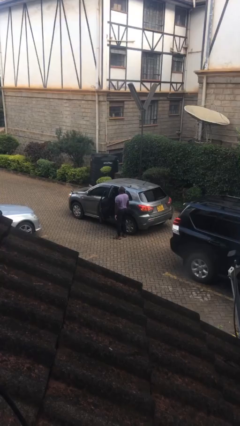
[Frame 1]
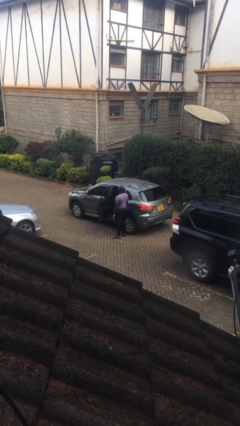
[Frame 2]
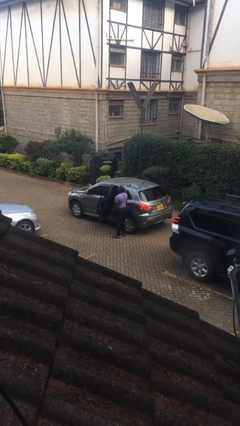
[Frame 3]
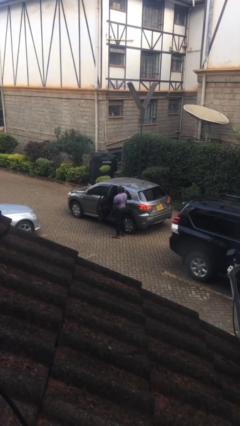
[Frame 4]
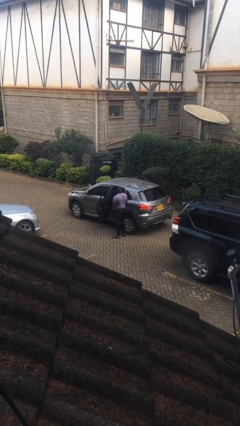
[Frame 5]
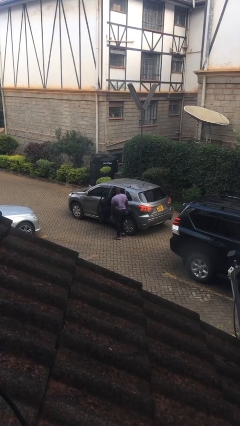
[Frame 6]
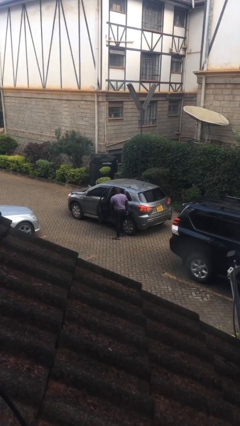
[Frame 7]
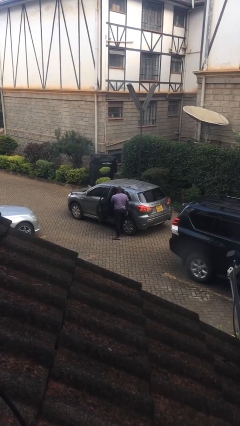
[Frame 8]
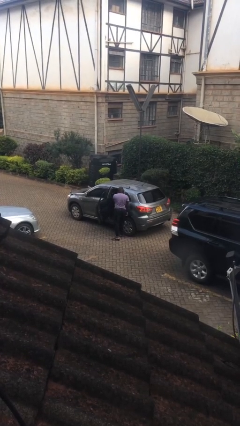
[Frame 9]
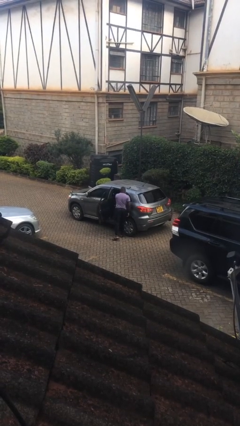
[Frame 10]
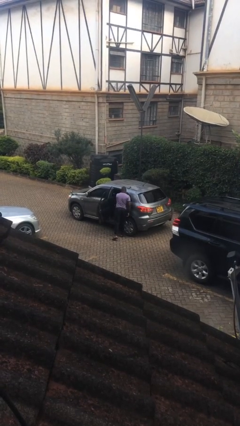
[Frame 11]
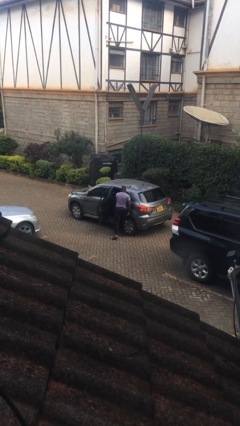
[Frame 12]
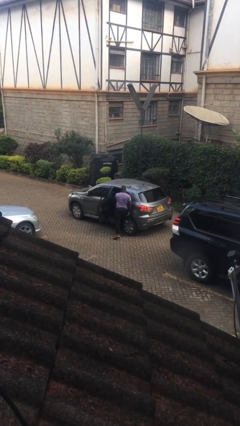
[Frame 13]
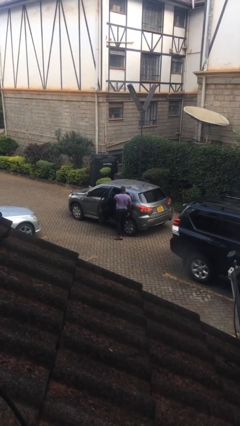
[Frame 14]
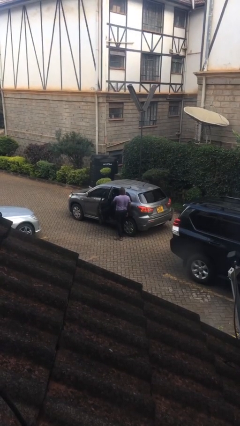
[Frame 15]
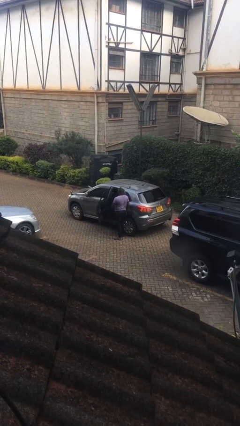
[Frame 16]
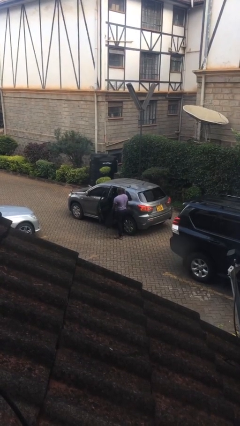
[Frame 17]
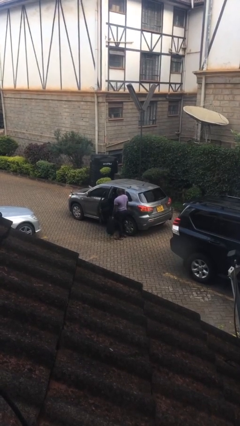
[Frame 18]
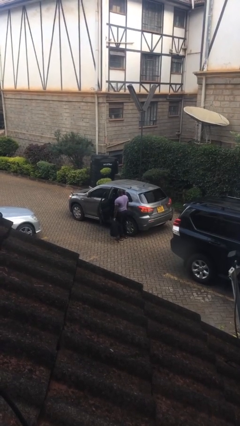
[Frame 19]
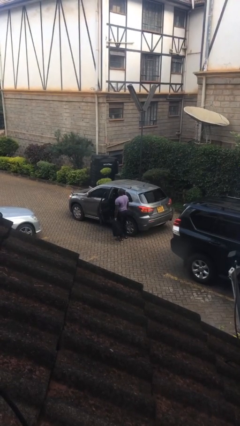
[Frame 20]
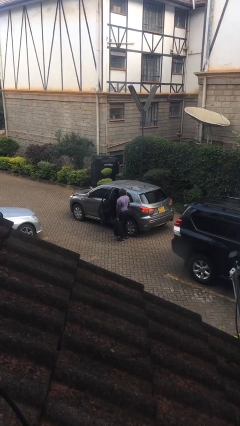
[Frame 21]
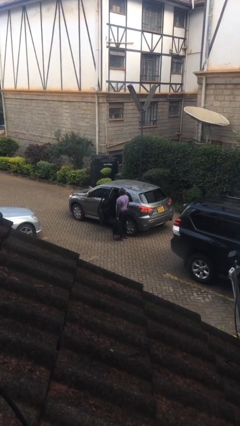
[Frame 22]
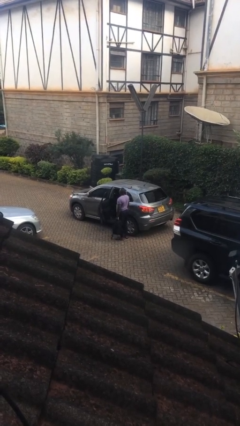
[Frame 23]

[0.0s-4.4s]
person unloads car

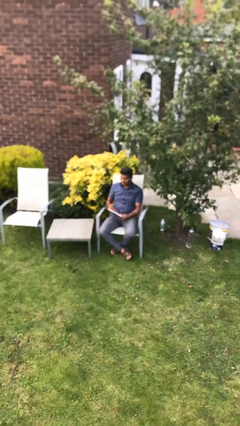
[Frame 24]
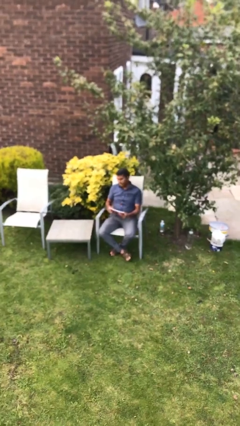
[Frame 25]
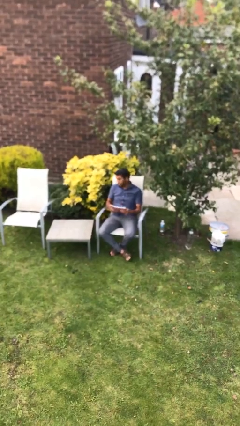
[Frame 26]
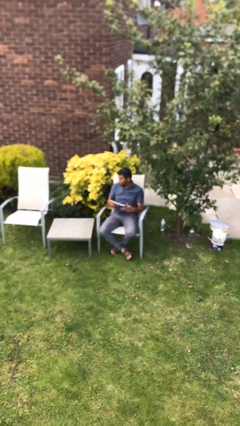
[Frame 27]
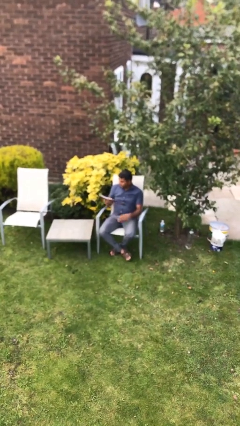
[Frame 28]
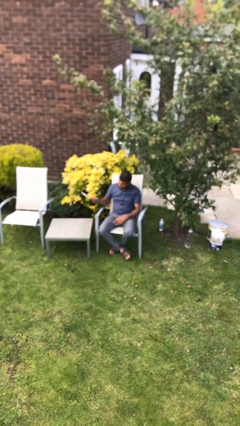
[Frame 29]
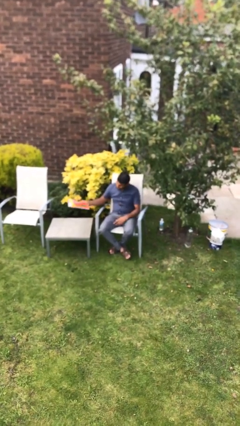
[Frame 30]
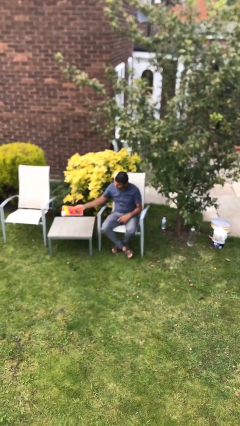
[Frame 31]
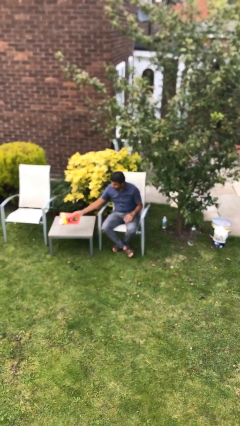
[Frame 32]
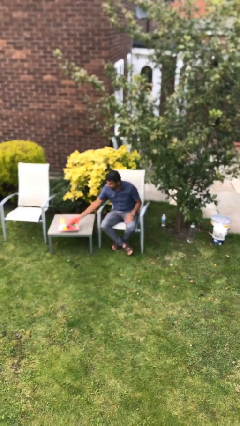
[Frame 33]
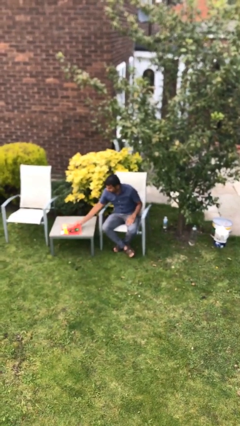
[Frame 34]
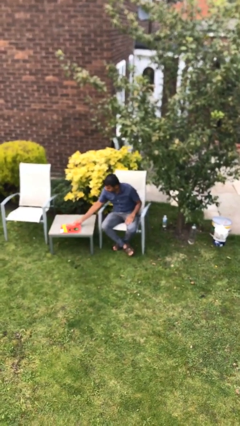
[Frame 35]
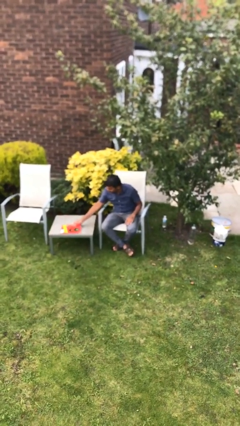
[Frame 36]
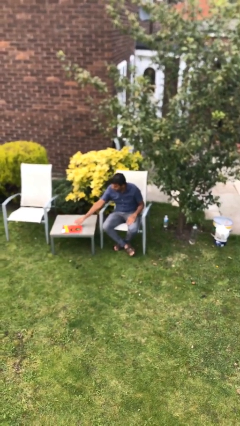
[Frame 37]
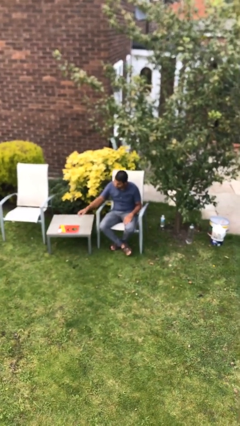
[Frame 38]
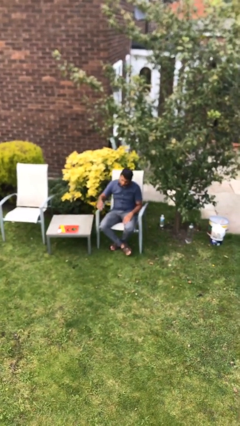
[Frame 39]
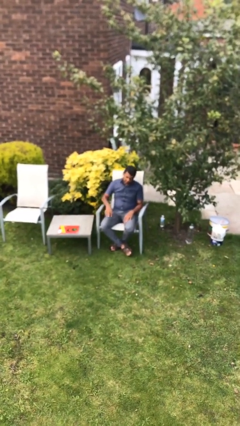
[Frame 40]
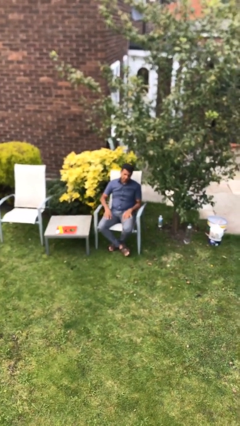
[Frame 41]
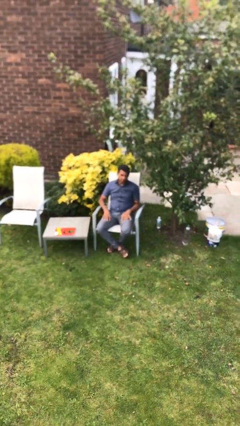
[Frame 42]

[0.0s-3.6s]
person puts down object on table

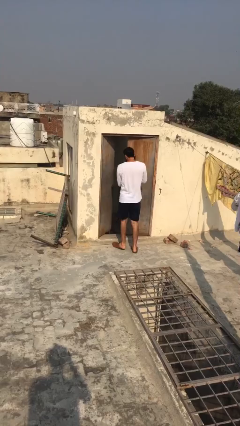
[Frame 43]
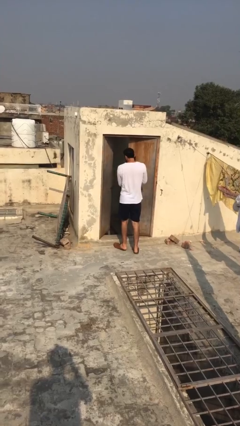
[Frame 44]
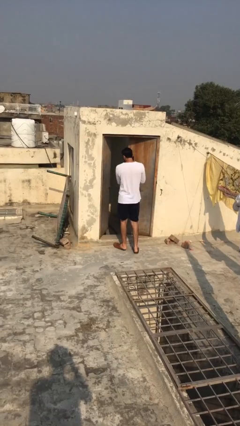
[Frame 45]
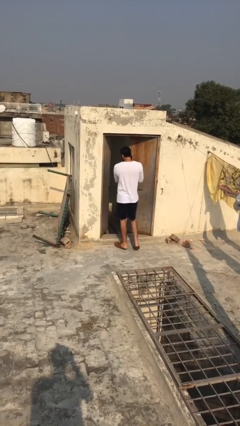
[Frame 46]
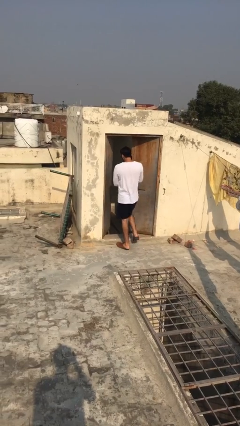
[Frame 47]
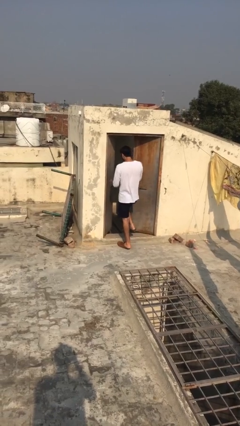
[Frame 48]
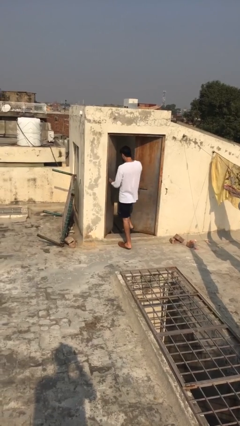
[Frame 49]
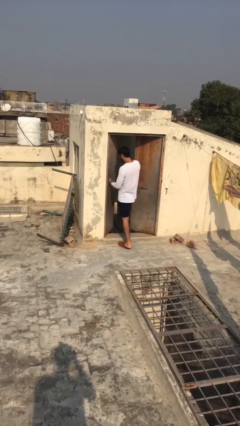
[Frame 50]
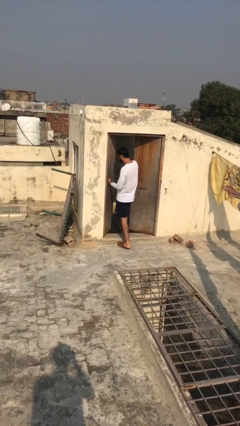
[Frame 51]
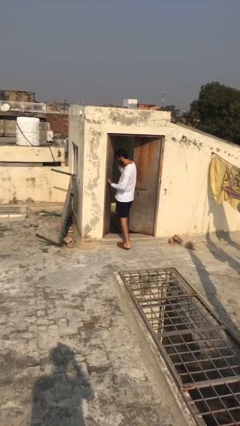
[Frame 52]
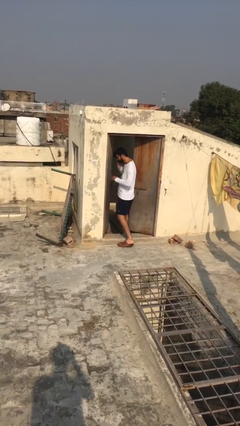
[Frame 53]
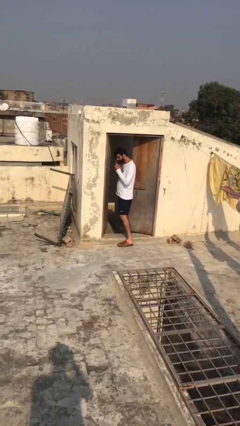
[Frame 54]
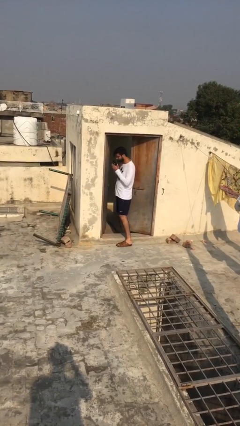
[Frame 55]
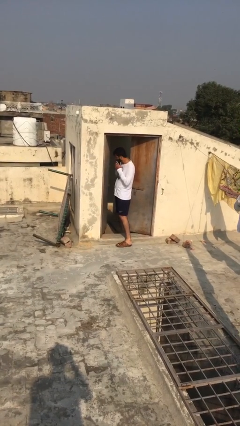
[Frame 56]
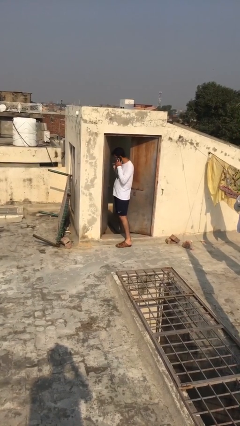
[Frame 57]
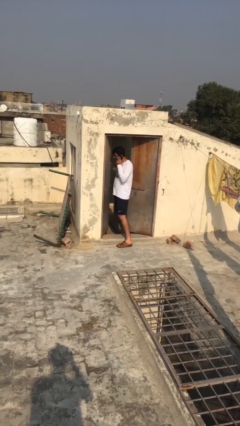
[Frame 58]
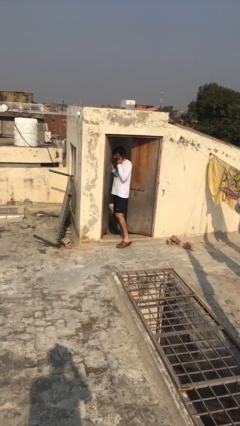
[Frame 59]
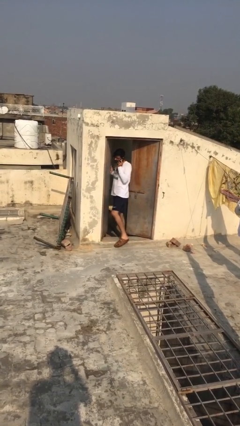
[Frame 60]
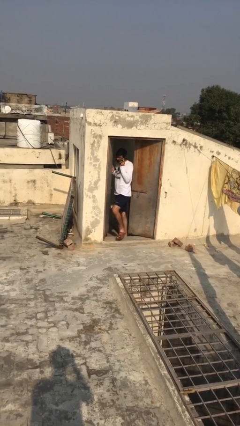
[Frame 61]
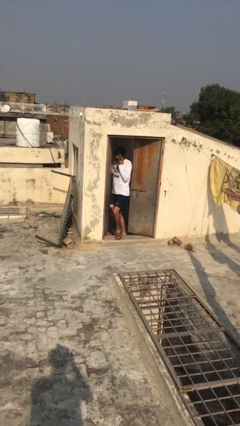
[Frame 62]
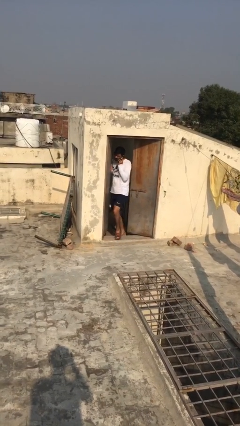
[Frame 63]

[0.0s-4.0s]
person exits scene through structure

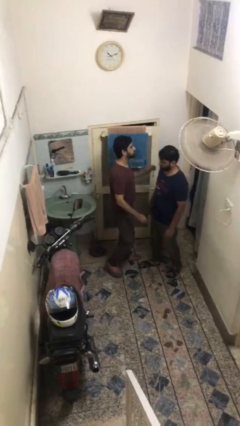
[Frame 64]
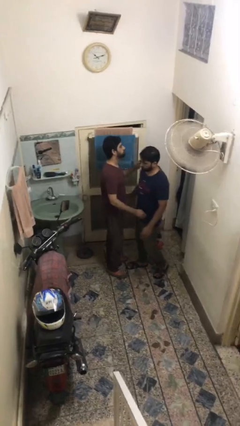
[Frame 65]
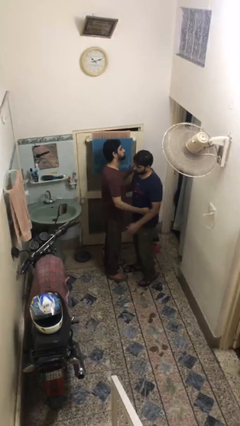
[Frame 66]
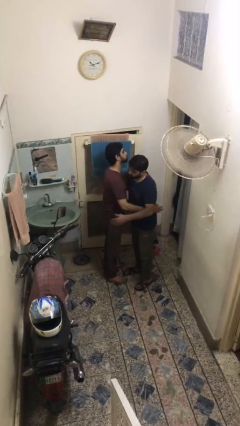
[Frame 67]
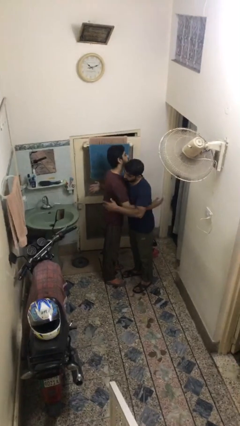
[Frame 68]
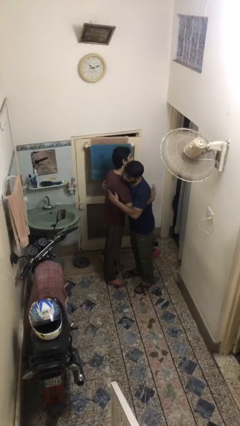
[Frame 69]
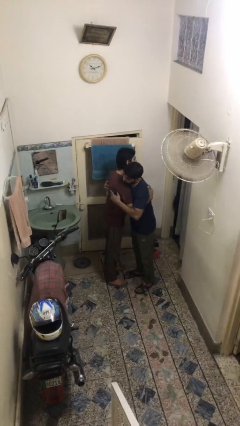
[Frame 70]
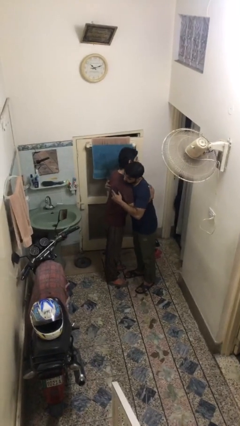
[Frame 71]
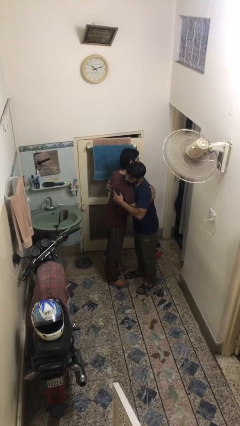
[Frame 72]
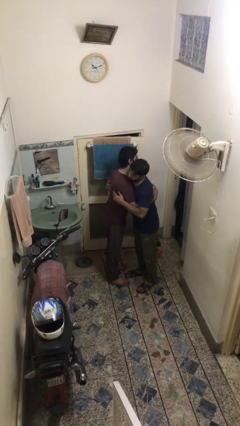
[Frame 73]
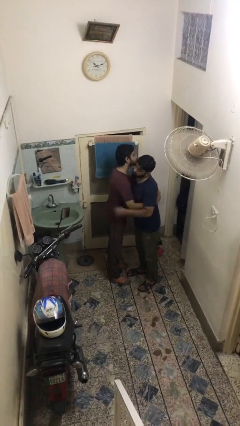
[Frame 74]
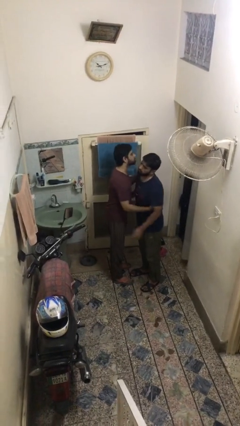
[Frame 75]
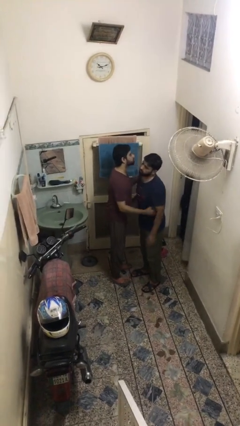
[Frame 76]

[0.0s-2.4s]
person embraces person

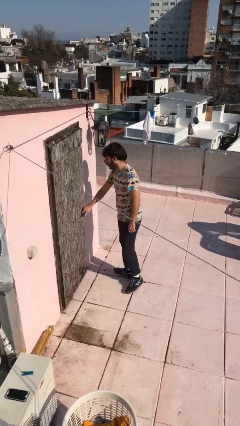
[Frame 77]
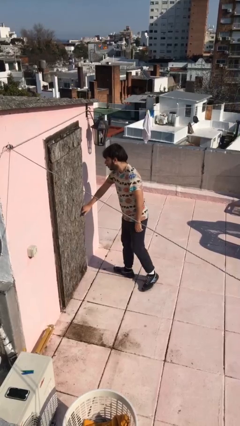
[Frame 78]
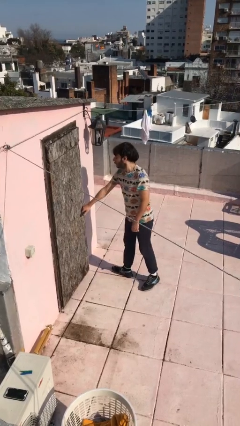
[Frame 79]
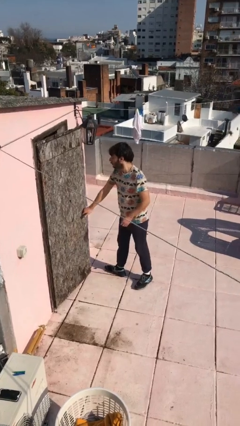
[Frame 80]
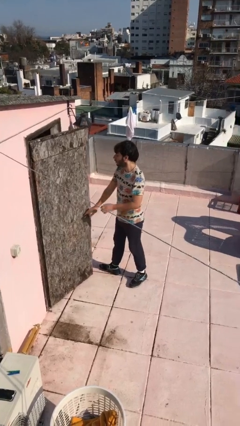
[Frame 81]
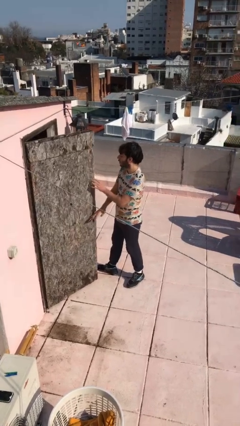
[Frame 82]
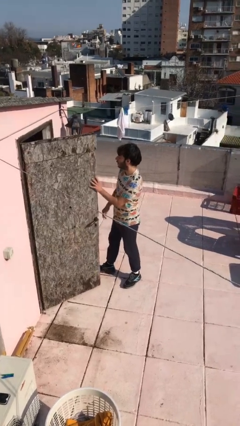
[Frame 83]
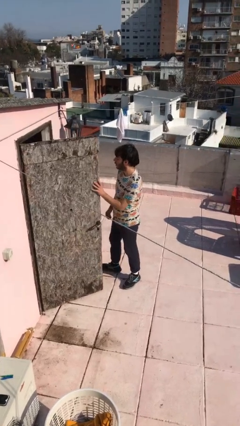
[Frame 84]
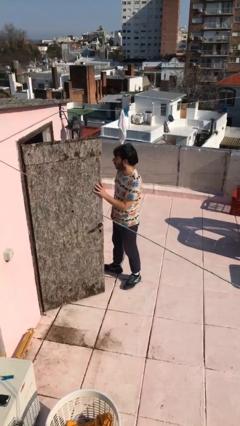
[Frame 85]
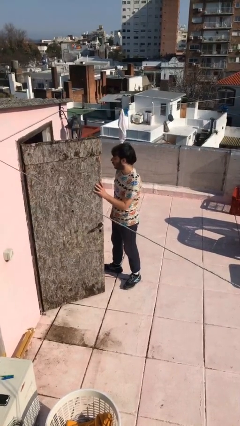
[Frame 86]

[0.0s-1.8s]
person opens facility door

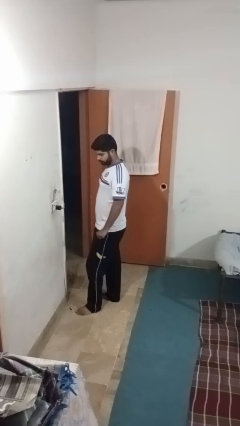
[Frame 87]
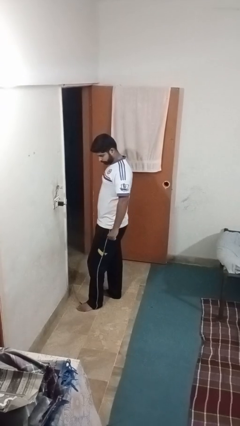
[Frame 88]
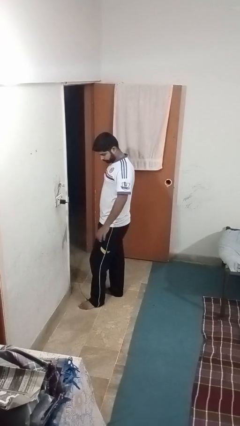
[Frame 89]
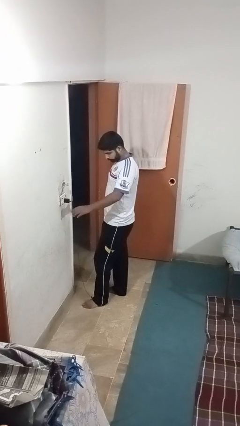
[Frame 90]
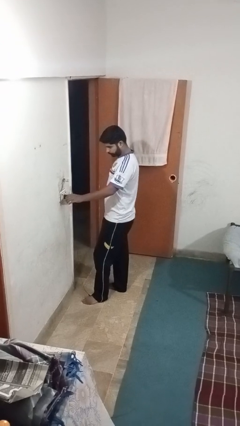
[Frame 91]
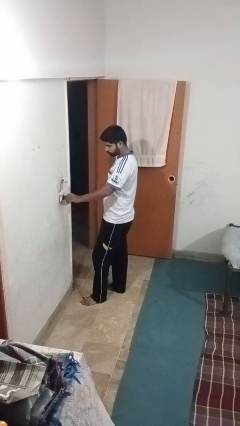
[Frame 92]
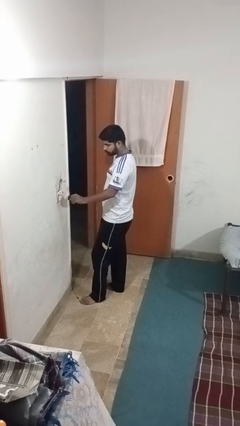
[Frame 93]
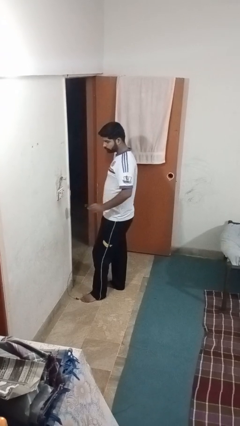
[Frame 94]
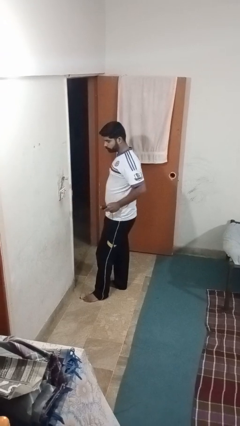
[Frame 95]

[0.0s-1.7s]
person unplugs from electrical socket
